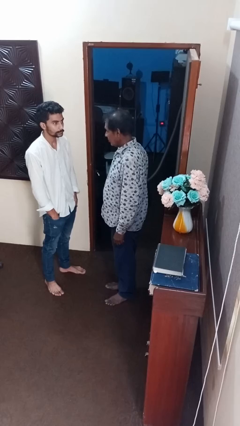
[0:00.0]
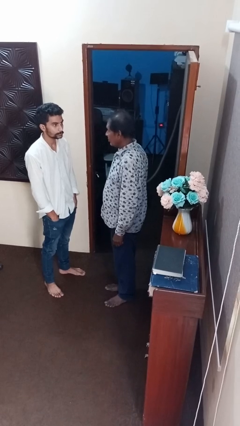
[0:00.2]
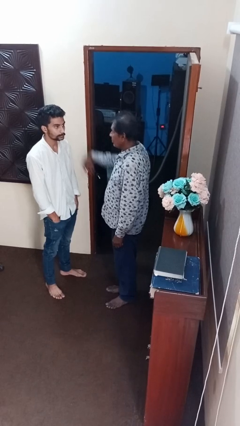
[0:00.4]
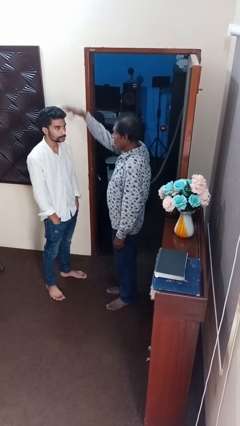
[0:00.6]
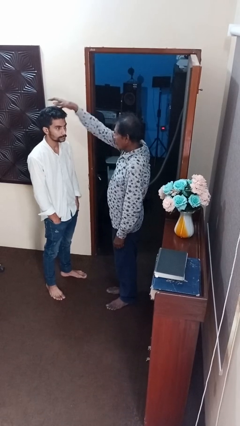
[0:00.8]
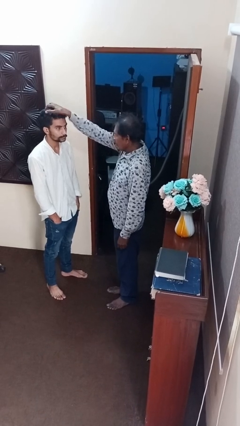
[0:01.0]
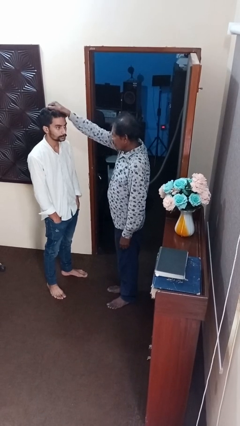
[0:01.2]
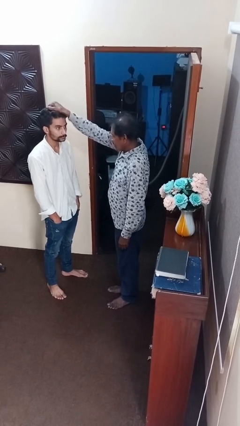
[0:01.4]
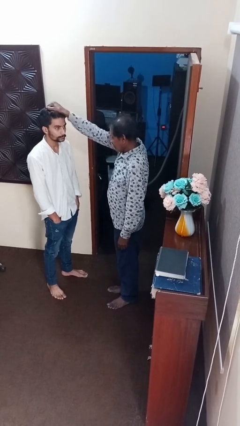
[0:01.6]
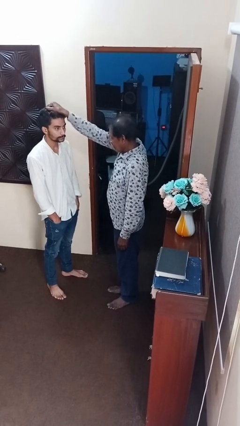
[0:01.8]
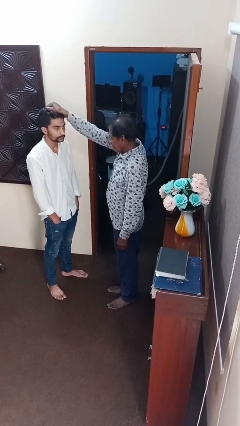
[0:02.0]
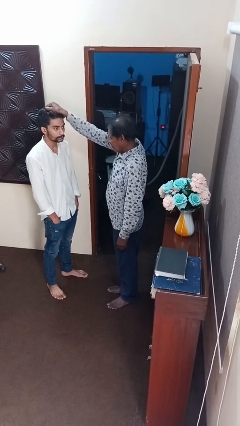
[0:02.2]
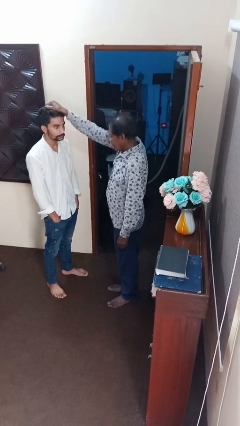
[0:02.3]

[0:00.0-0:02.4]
person grabs person by hair

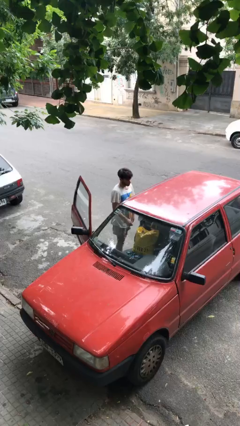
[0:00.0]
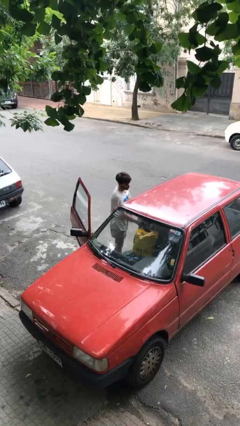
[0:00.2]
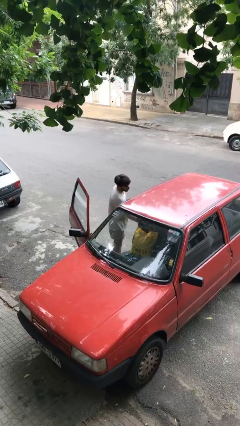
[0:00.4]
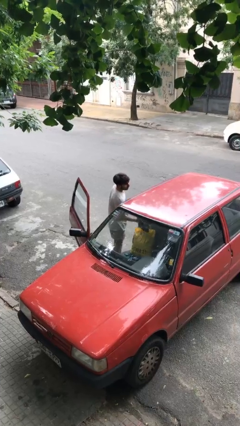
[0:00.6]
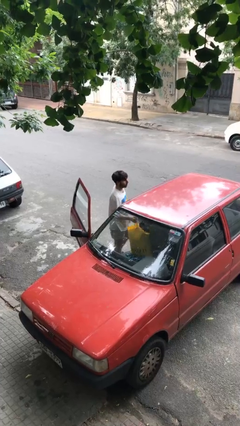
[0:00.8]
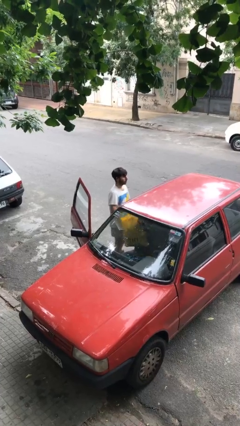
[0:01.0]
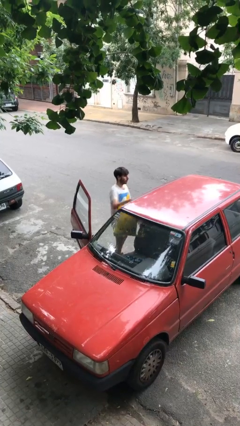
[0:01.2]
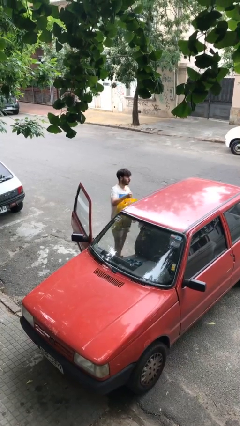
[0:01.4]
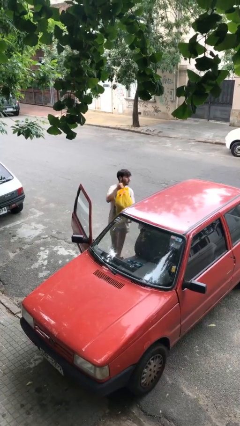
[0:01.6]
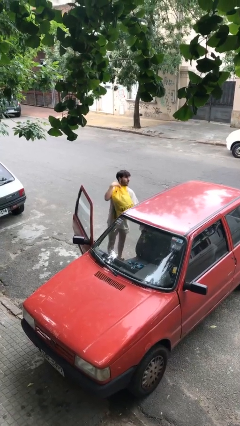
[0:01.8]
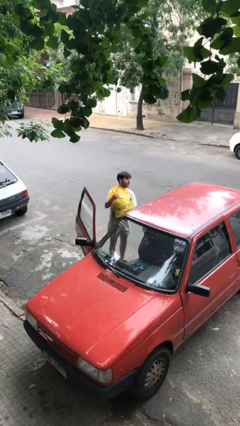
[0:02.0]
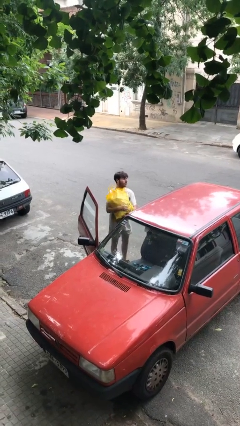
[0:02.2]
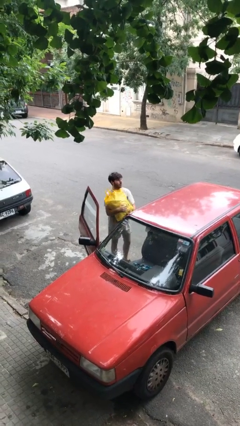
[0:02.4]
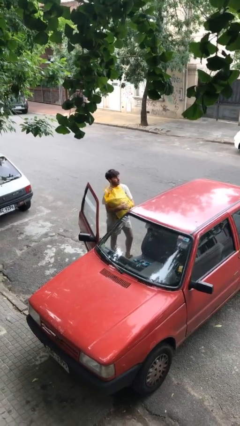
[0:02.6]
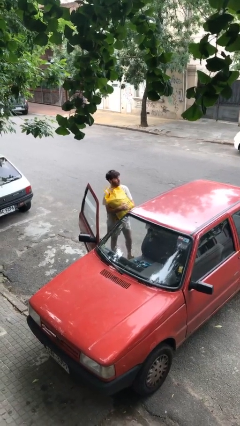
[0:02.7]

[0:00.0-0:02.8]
person unloads car

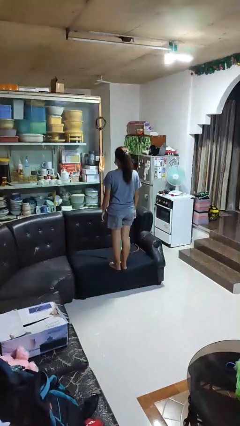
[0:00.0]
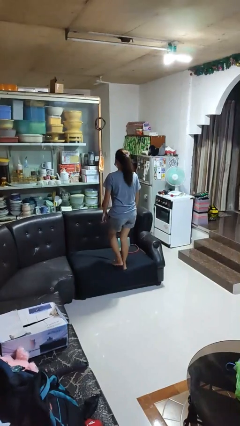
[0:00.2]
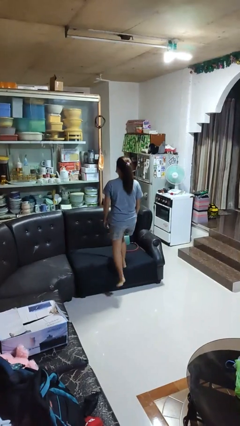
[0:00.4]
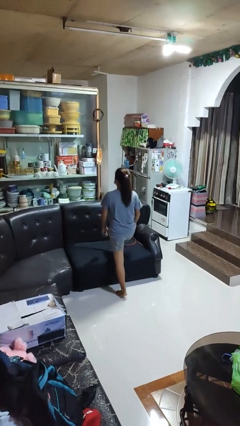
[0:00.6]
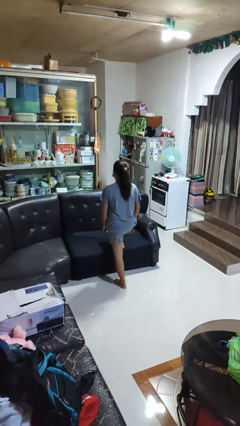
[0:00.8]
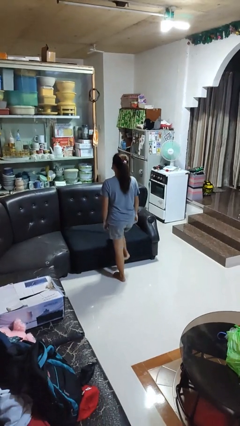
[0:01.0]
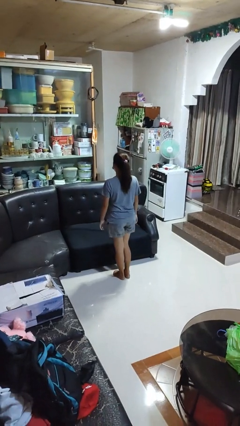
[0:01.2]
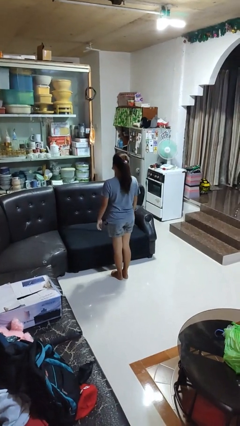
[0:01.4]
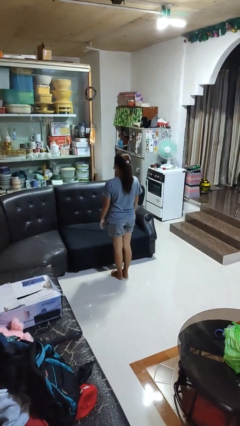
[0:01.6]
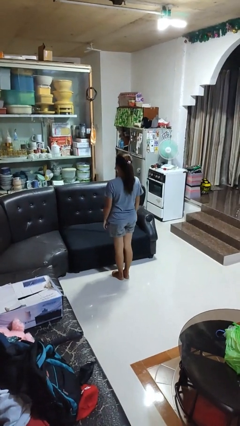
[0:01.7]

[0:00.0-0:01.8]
person climbs off couch

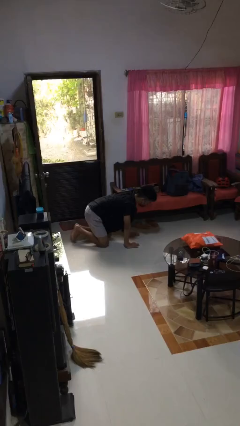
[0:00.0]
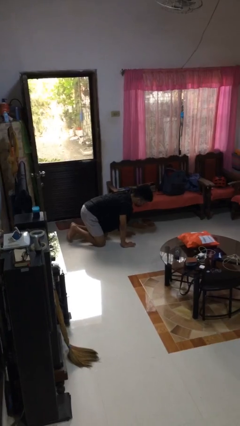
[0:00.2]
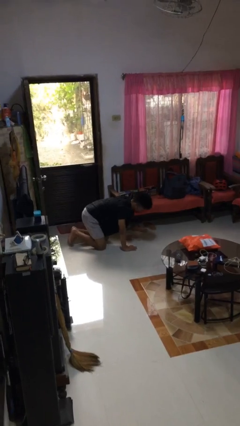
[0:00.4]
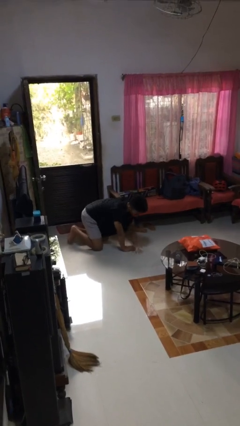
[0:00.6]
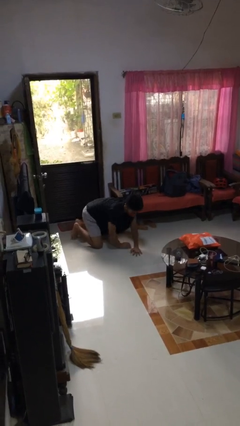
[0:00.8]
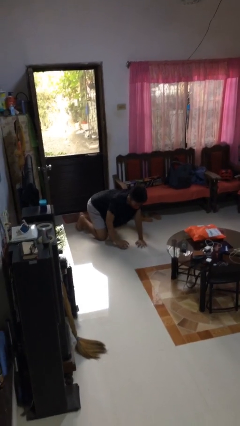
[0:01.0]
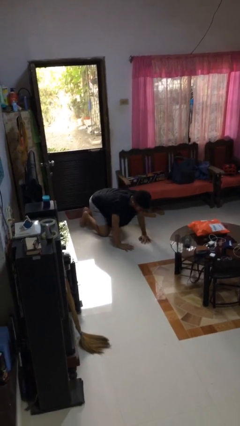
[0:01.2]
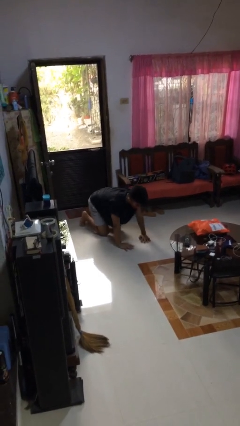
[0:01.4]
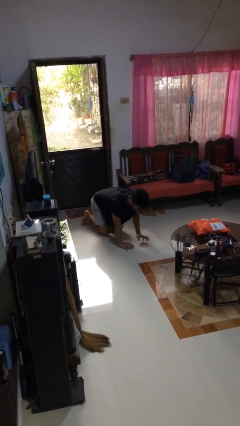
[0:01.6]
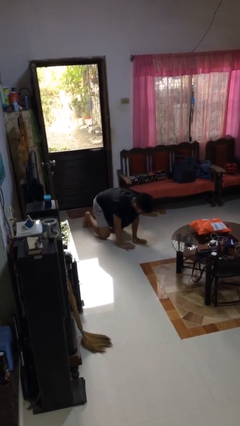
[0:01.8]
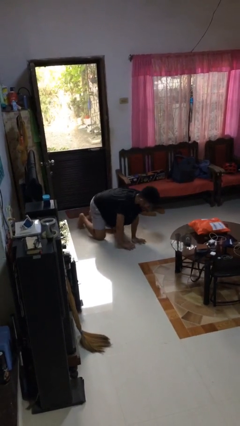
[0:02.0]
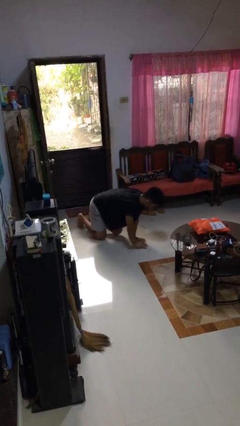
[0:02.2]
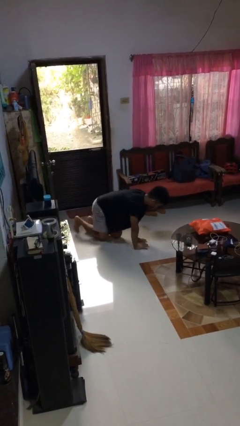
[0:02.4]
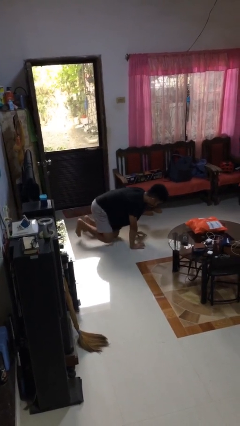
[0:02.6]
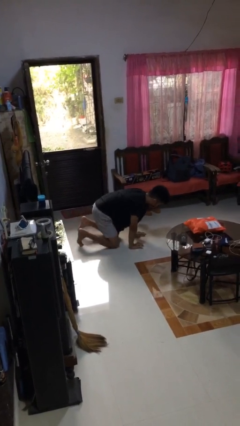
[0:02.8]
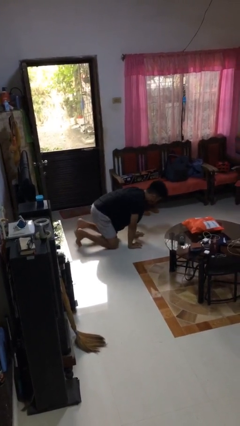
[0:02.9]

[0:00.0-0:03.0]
person crawls

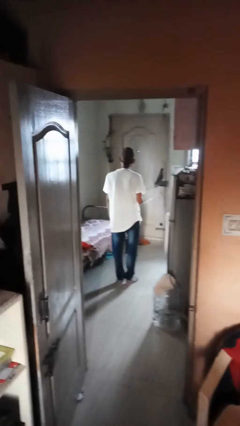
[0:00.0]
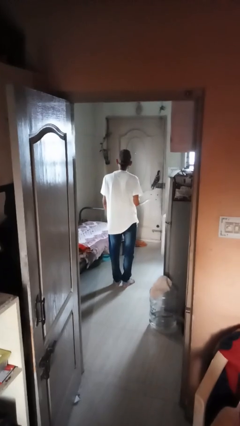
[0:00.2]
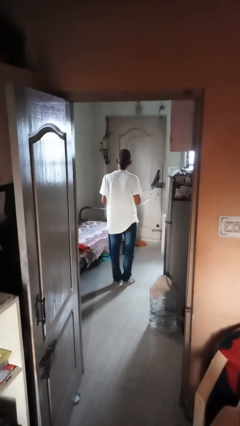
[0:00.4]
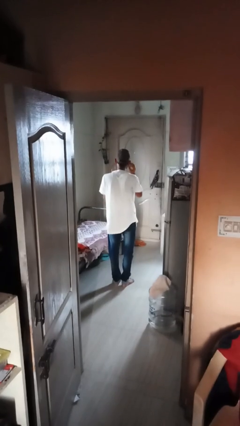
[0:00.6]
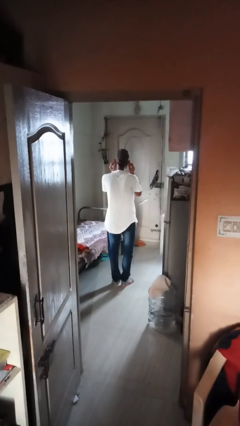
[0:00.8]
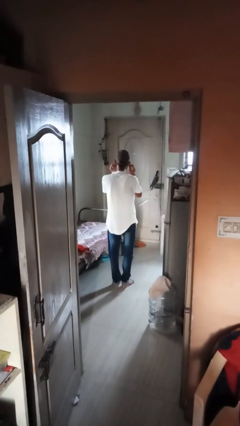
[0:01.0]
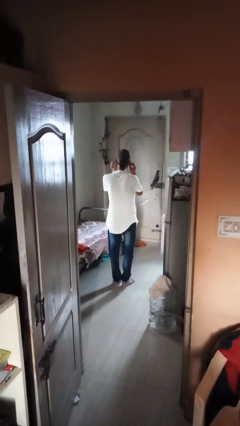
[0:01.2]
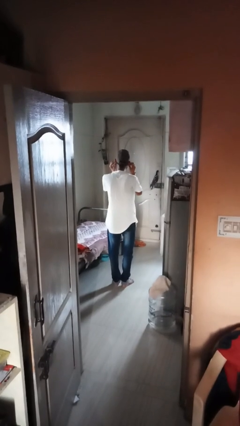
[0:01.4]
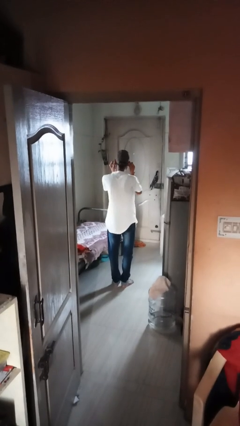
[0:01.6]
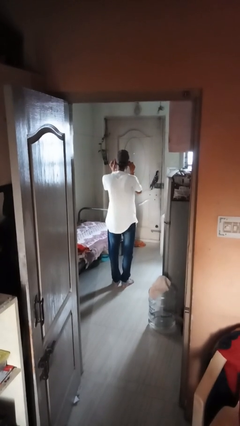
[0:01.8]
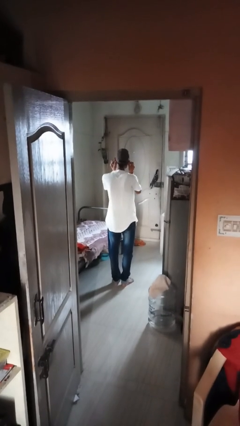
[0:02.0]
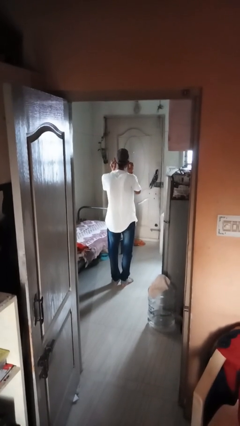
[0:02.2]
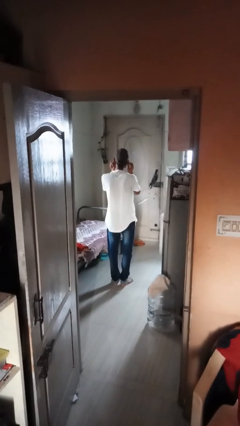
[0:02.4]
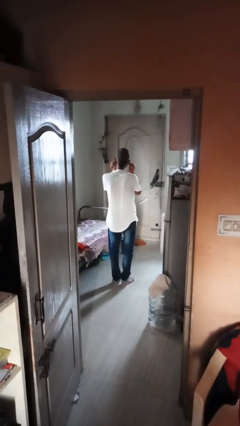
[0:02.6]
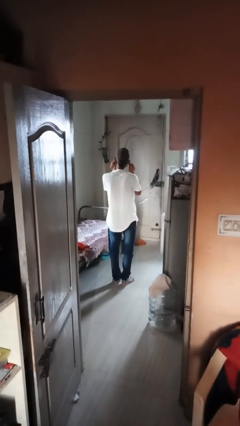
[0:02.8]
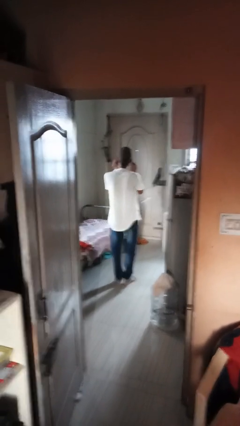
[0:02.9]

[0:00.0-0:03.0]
person touches earlobe

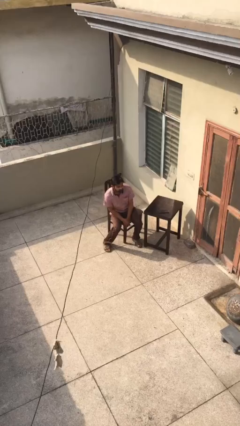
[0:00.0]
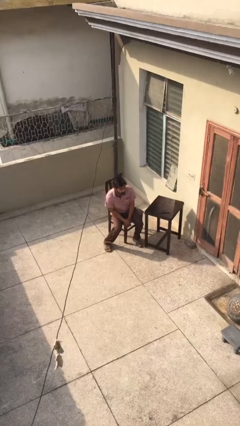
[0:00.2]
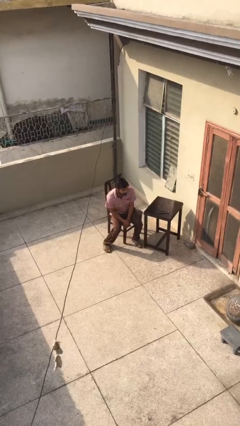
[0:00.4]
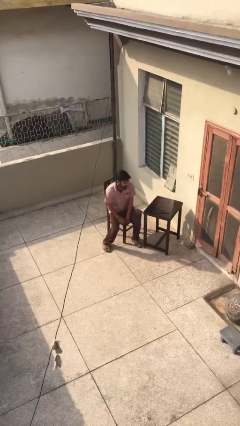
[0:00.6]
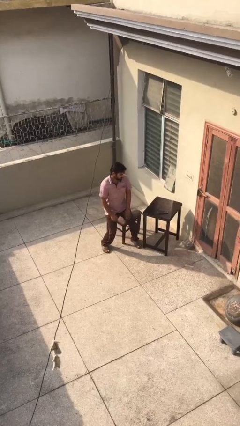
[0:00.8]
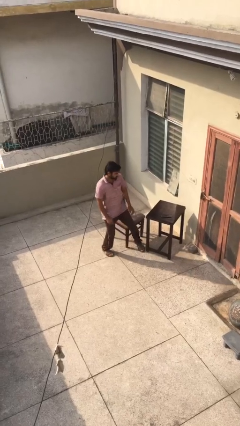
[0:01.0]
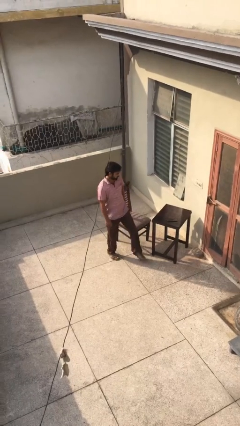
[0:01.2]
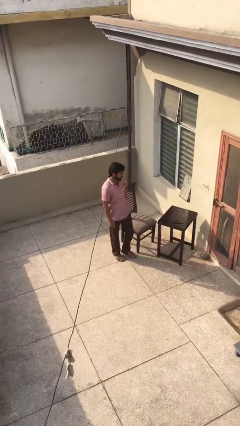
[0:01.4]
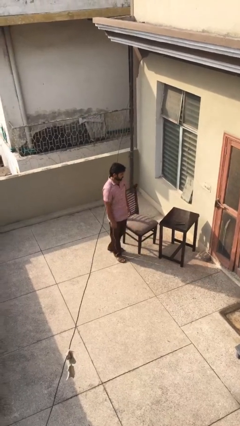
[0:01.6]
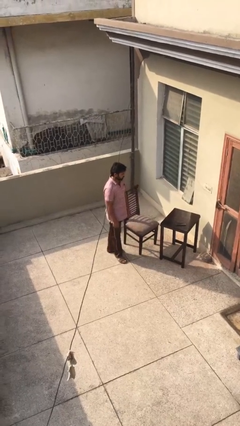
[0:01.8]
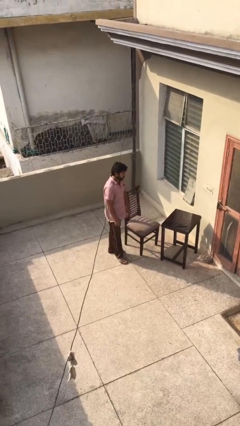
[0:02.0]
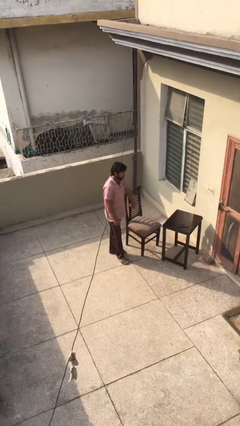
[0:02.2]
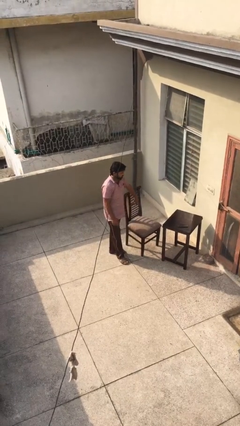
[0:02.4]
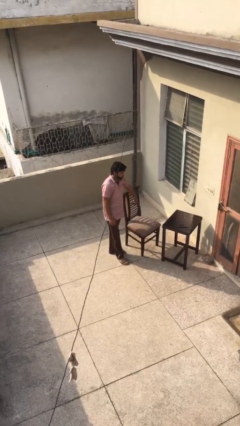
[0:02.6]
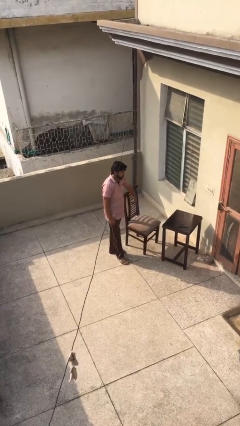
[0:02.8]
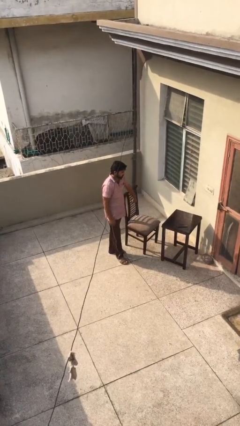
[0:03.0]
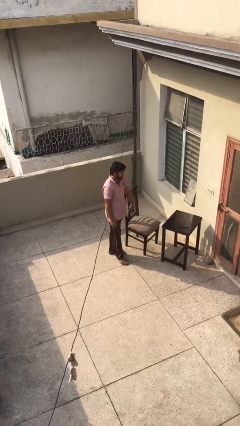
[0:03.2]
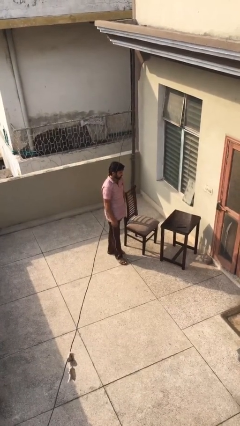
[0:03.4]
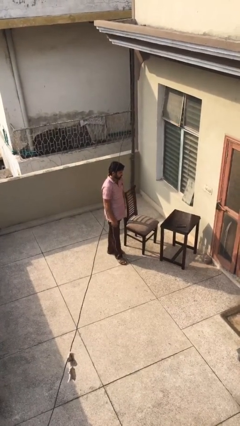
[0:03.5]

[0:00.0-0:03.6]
person stands up

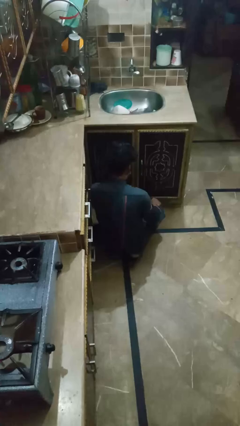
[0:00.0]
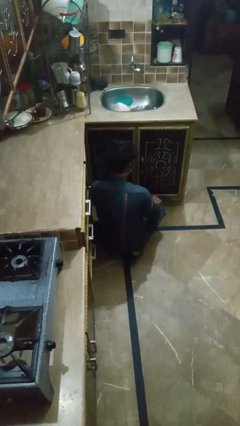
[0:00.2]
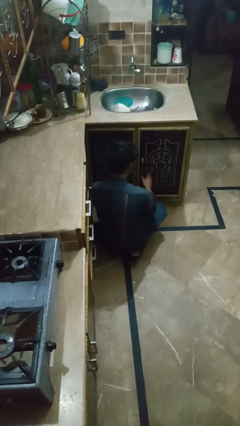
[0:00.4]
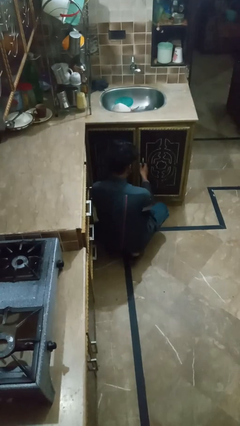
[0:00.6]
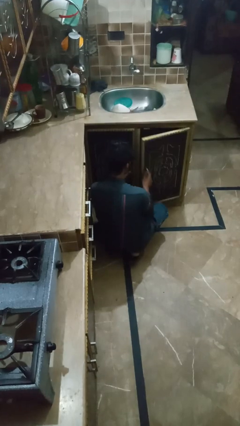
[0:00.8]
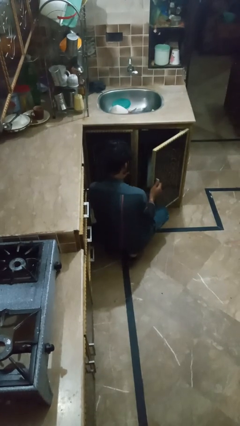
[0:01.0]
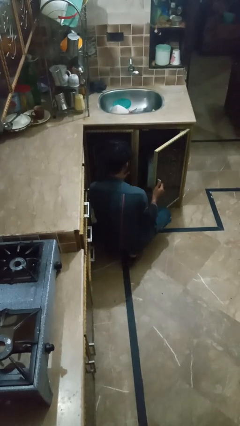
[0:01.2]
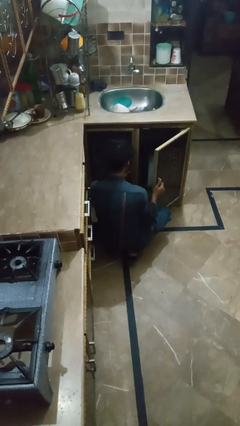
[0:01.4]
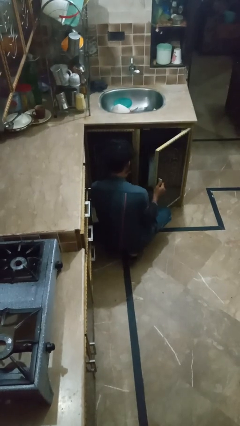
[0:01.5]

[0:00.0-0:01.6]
person opens kitchen drawer
